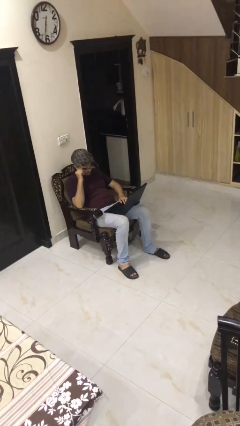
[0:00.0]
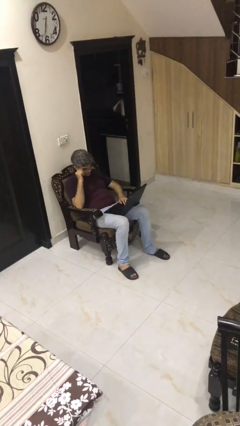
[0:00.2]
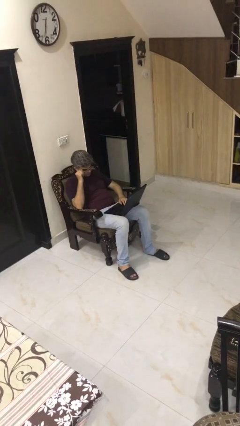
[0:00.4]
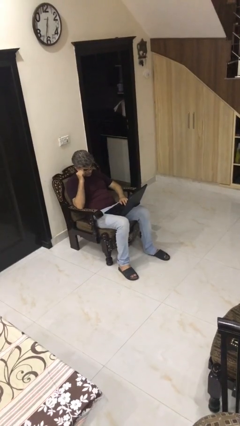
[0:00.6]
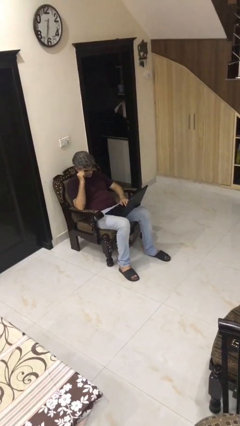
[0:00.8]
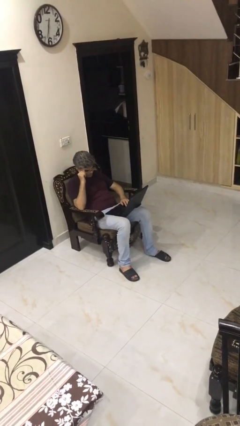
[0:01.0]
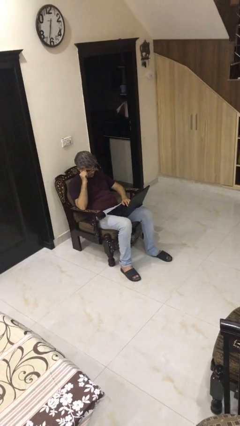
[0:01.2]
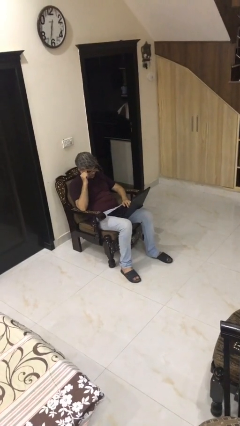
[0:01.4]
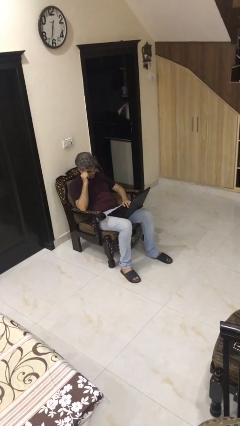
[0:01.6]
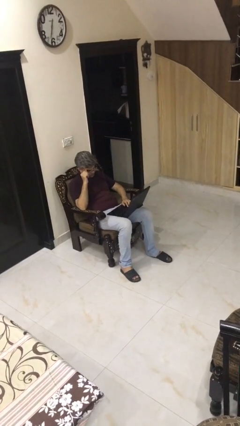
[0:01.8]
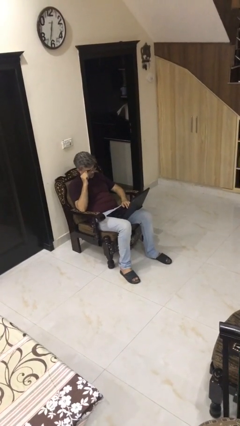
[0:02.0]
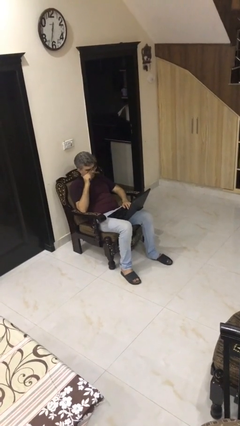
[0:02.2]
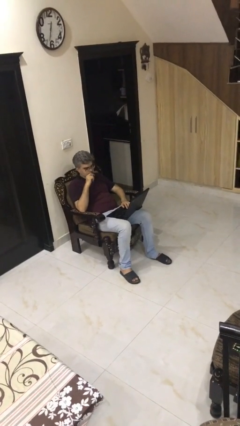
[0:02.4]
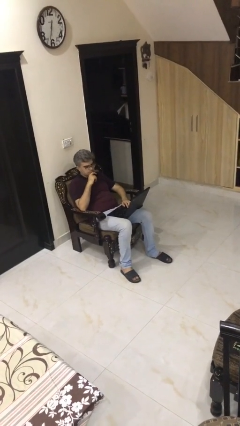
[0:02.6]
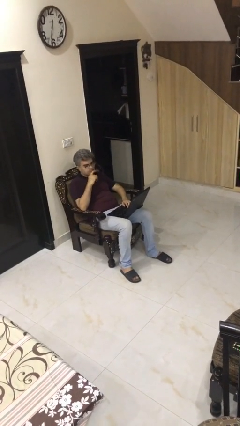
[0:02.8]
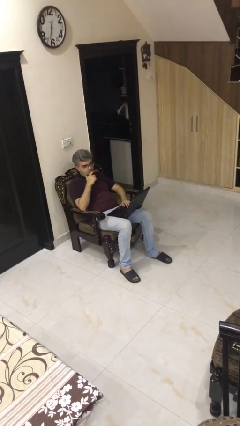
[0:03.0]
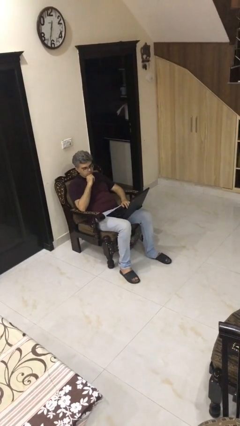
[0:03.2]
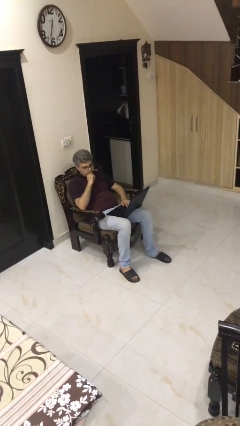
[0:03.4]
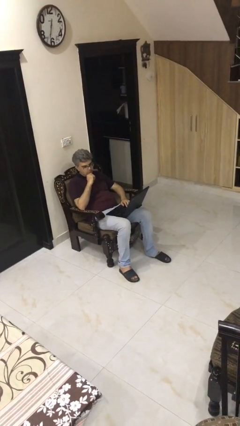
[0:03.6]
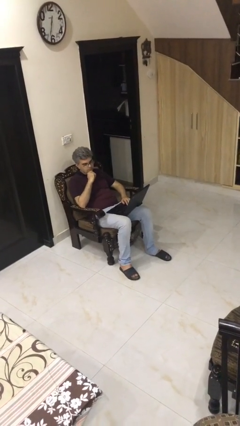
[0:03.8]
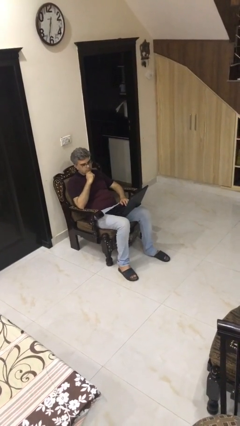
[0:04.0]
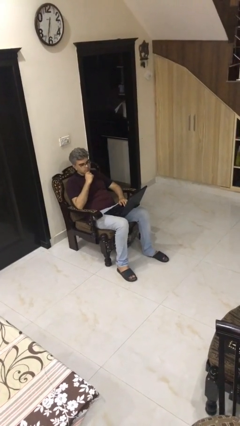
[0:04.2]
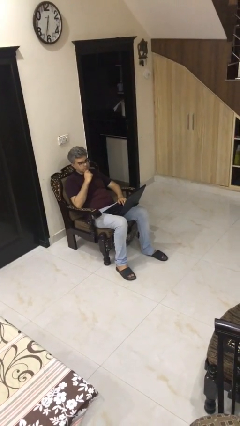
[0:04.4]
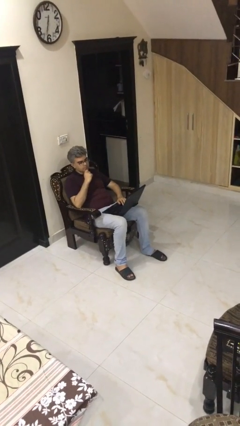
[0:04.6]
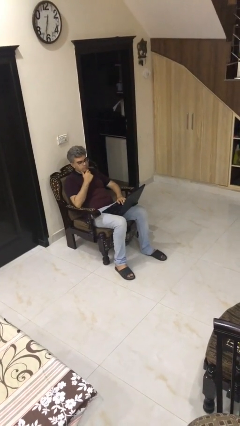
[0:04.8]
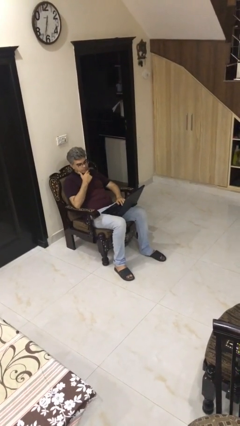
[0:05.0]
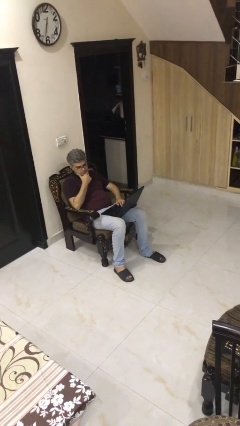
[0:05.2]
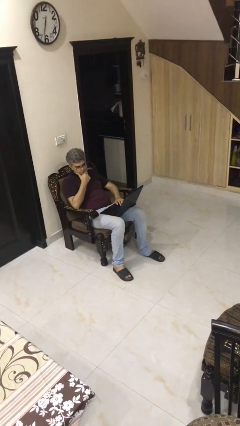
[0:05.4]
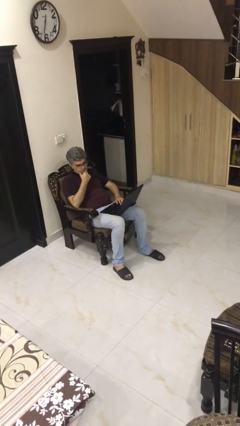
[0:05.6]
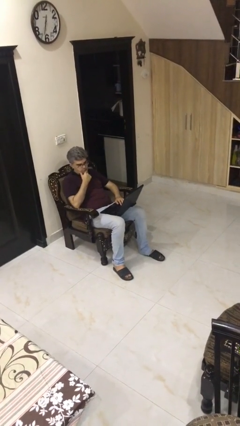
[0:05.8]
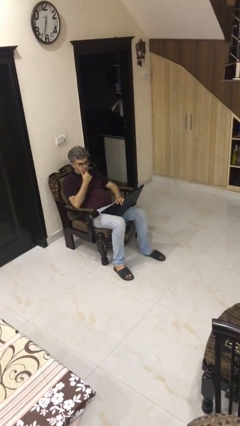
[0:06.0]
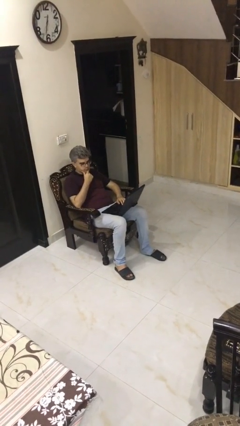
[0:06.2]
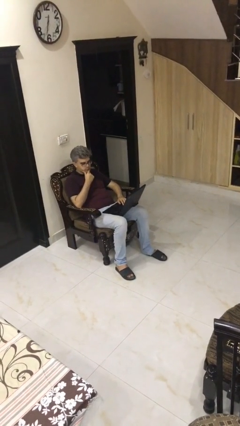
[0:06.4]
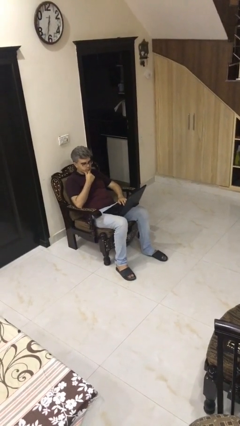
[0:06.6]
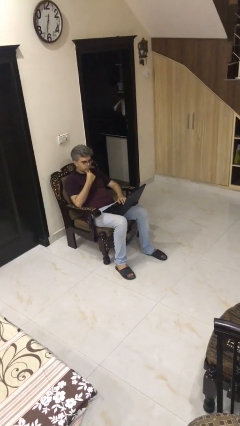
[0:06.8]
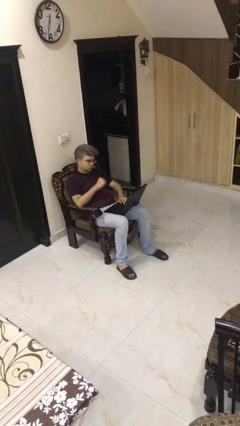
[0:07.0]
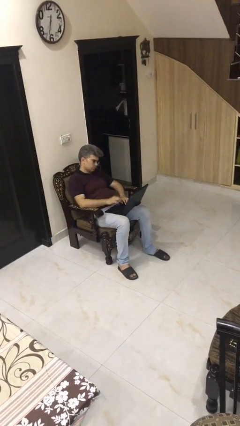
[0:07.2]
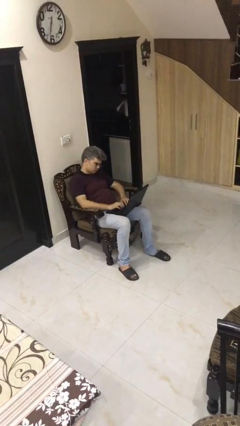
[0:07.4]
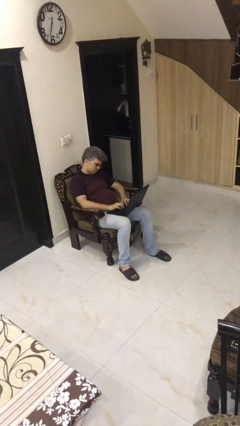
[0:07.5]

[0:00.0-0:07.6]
person interacts with laptop

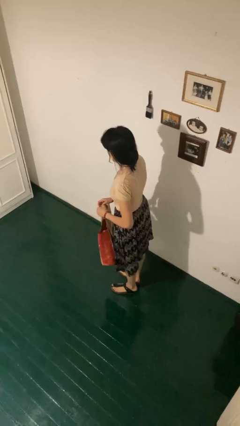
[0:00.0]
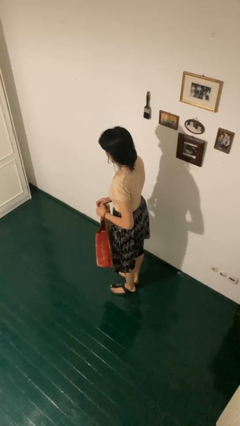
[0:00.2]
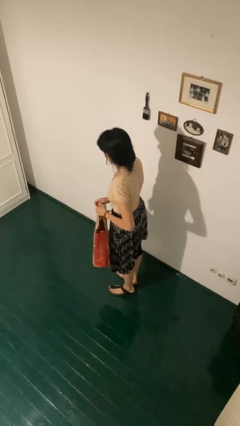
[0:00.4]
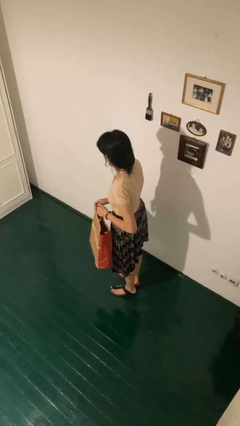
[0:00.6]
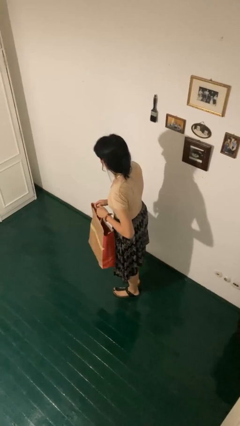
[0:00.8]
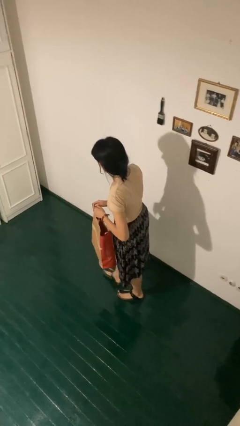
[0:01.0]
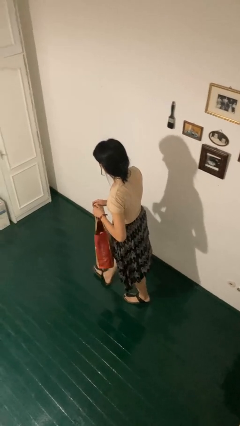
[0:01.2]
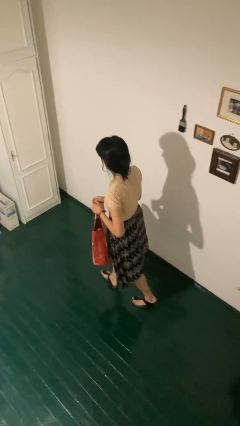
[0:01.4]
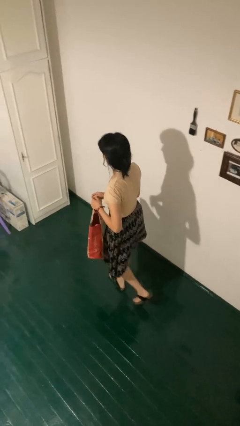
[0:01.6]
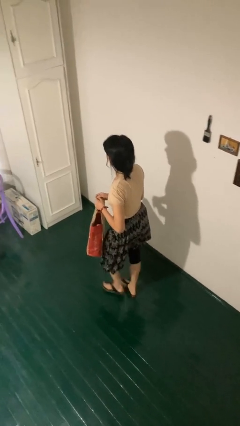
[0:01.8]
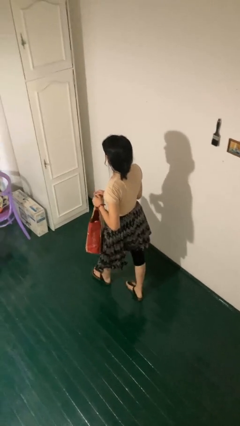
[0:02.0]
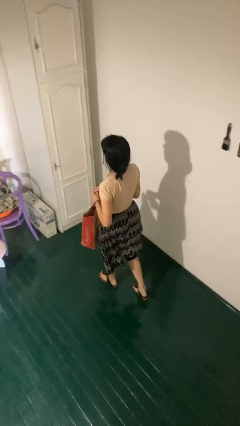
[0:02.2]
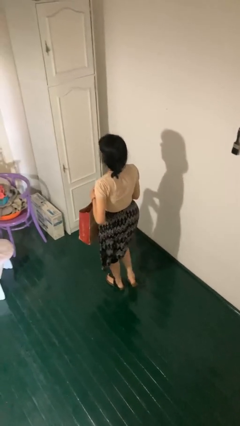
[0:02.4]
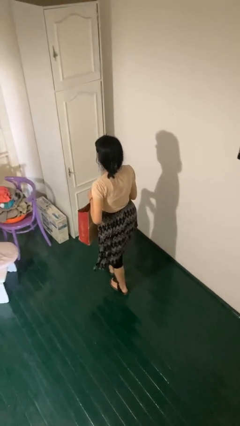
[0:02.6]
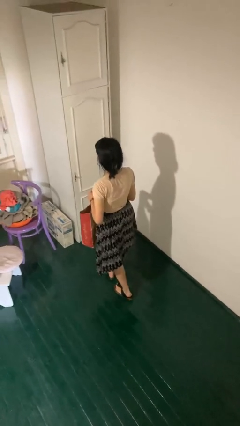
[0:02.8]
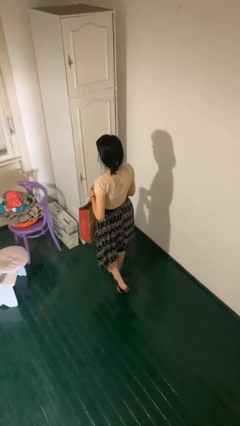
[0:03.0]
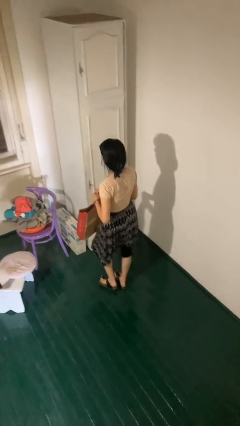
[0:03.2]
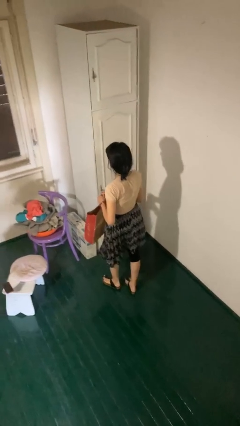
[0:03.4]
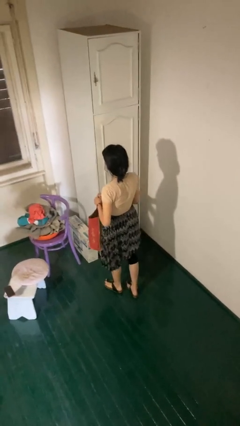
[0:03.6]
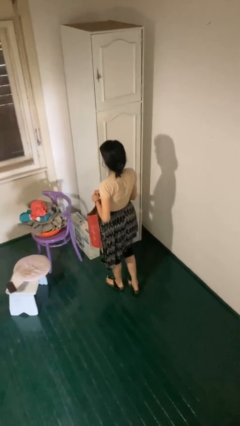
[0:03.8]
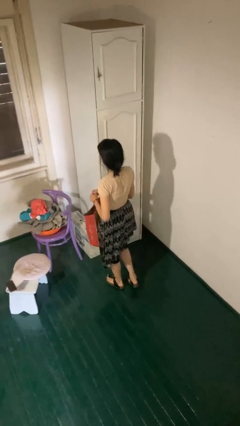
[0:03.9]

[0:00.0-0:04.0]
person carries groceries

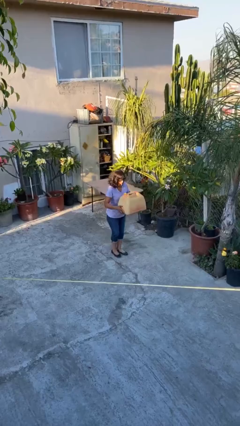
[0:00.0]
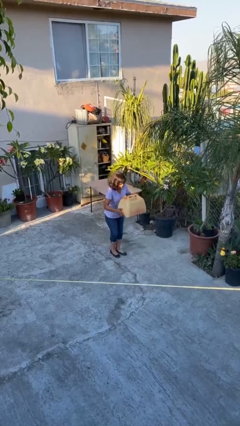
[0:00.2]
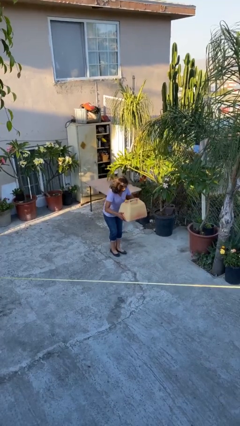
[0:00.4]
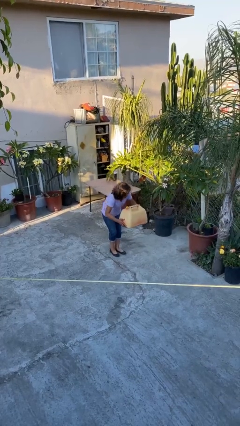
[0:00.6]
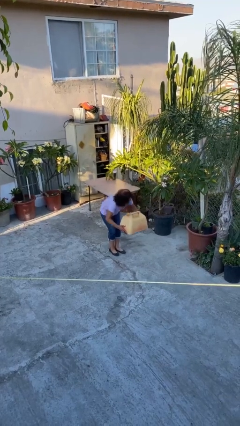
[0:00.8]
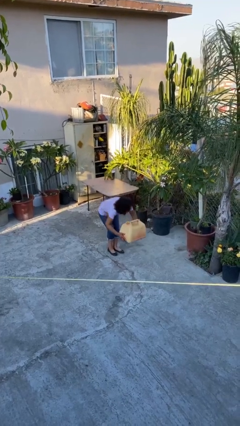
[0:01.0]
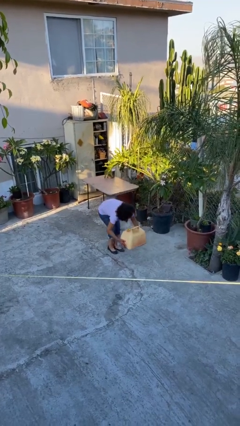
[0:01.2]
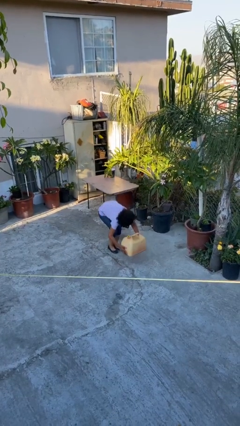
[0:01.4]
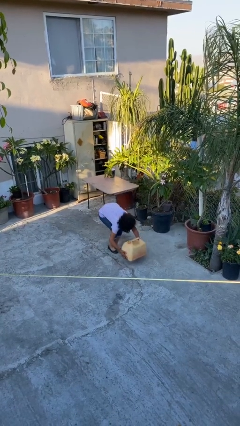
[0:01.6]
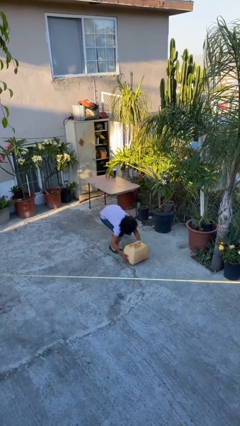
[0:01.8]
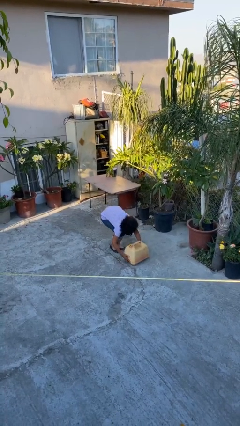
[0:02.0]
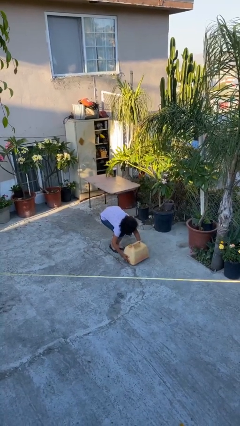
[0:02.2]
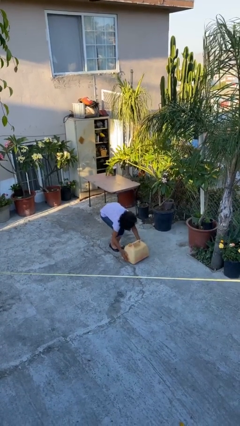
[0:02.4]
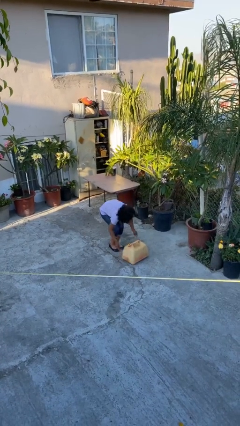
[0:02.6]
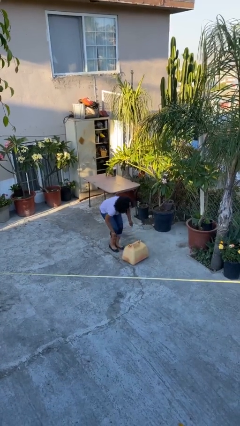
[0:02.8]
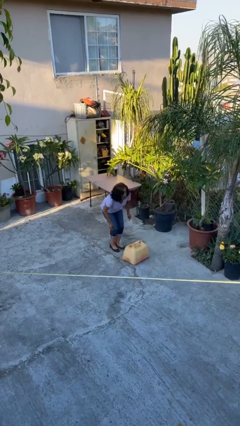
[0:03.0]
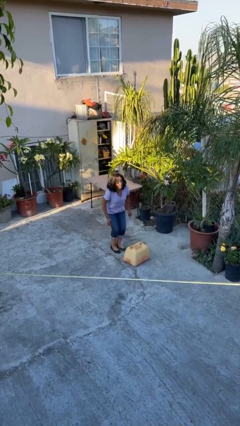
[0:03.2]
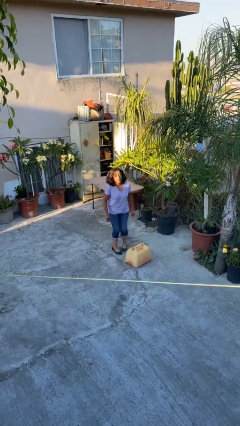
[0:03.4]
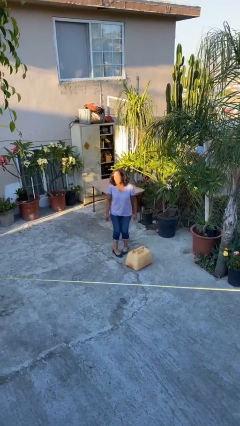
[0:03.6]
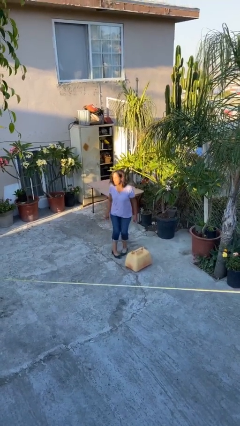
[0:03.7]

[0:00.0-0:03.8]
person puts down object on floor

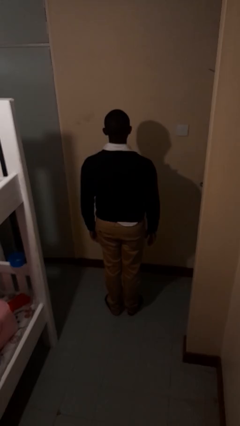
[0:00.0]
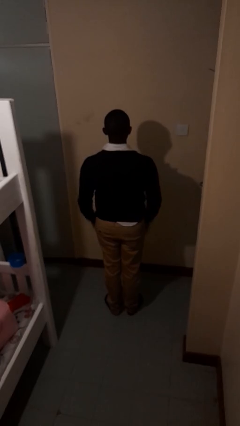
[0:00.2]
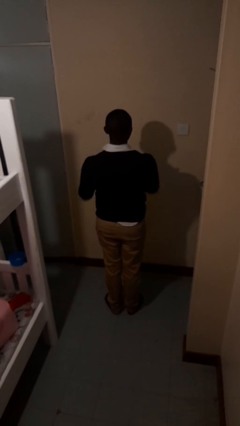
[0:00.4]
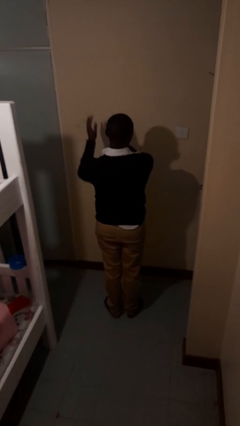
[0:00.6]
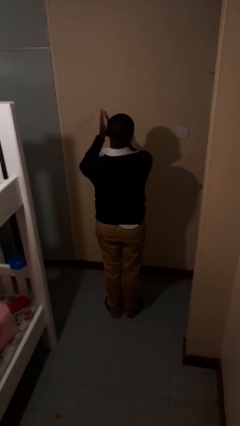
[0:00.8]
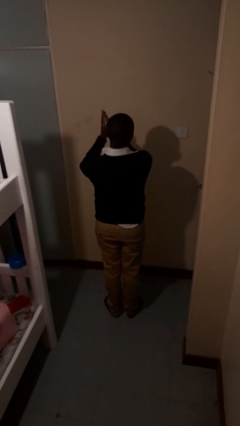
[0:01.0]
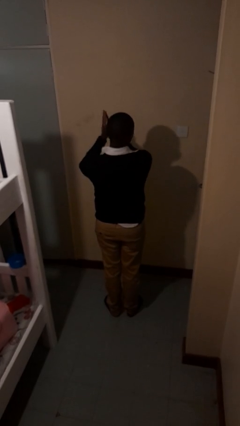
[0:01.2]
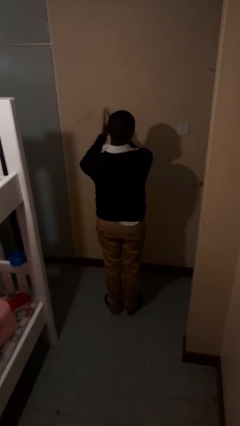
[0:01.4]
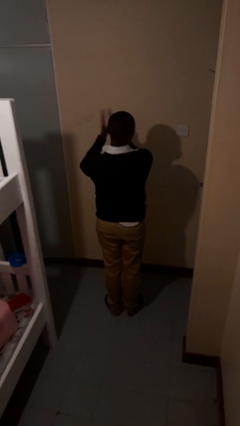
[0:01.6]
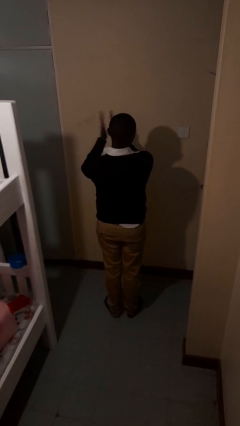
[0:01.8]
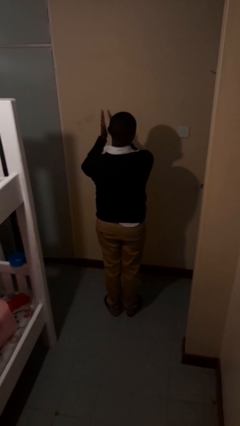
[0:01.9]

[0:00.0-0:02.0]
person claps hands
